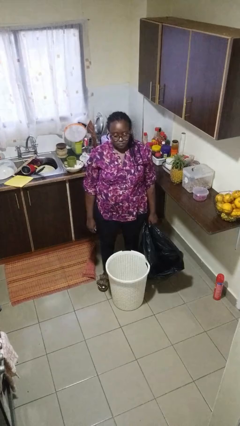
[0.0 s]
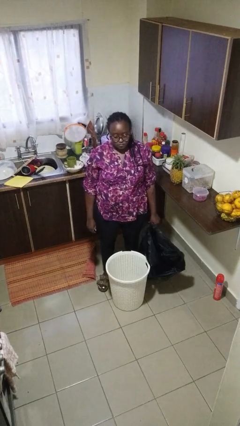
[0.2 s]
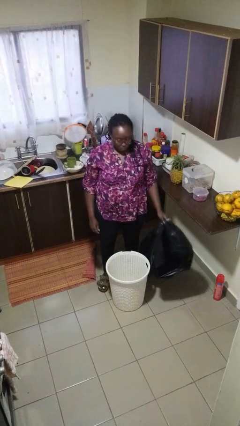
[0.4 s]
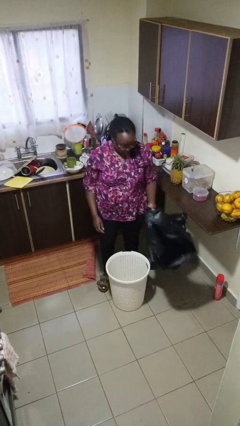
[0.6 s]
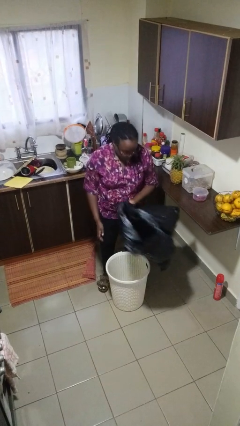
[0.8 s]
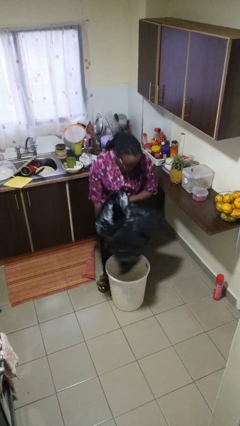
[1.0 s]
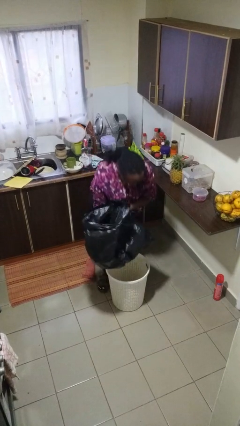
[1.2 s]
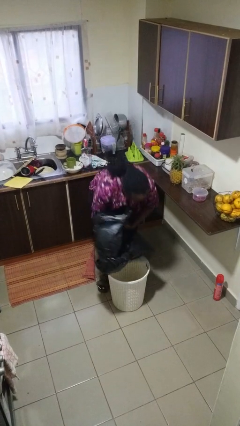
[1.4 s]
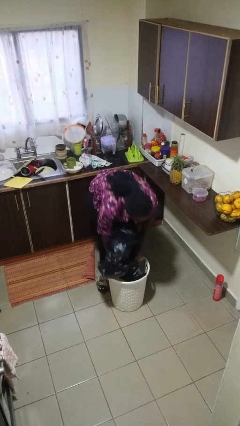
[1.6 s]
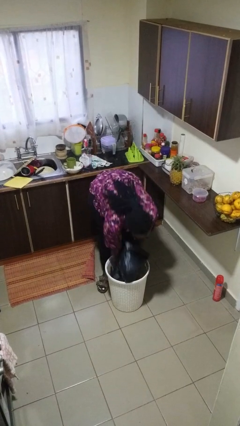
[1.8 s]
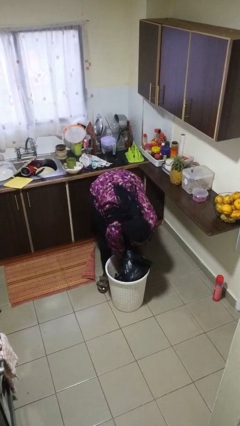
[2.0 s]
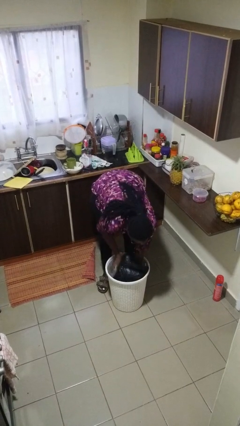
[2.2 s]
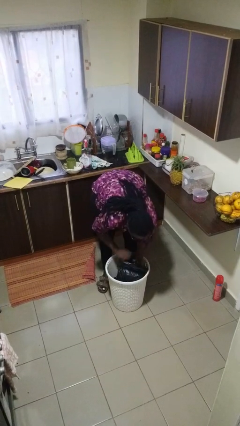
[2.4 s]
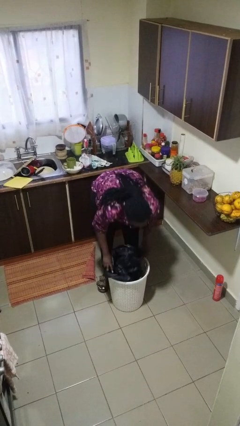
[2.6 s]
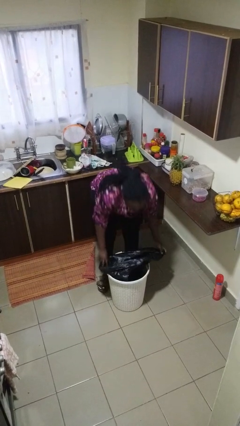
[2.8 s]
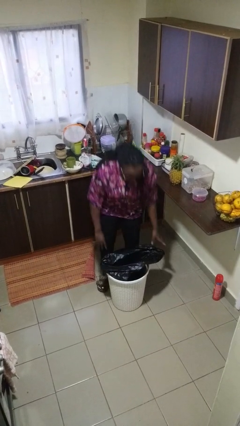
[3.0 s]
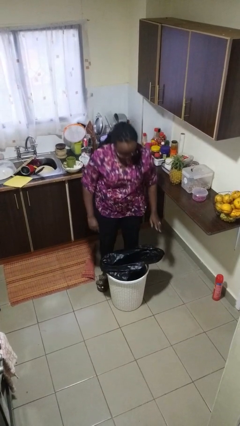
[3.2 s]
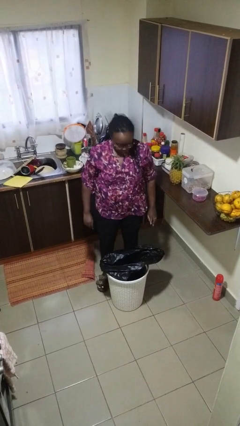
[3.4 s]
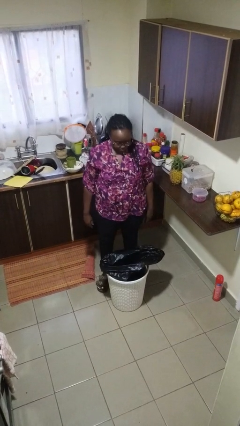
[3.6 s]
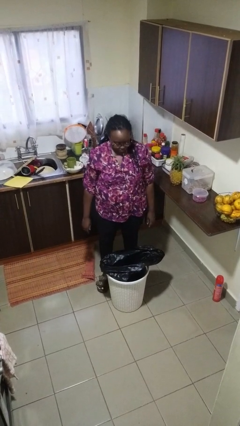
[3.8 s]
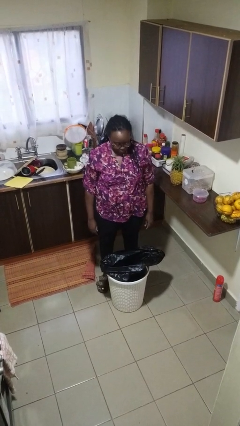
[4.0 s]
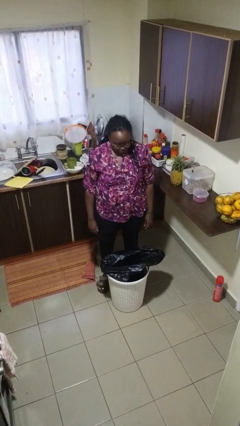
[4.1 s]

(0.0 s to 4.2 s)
person removes trashbag from trashcan

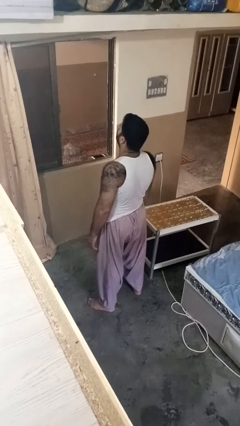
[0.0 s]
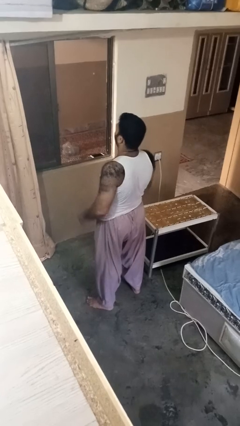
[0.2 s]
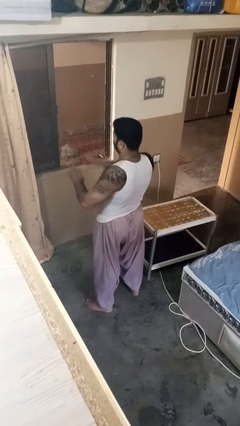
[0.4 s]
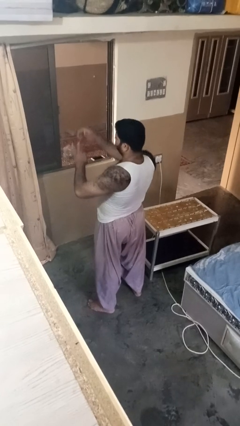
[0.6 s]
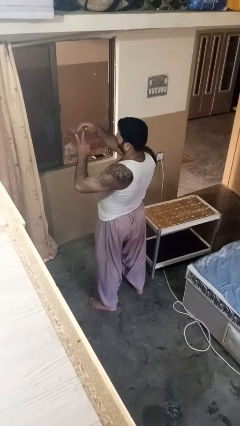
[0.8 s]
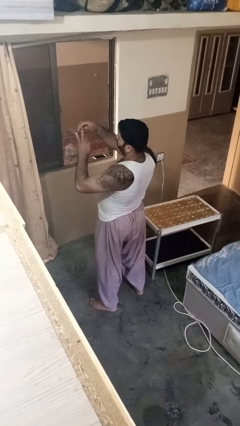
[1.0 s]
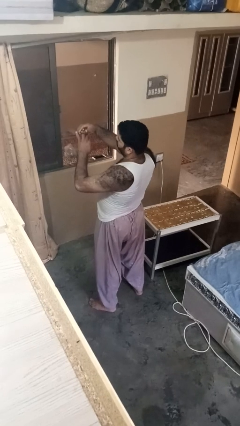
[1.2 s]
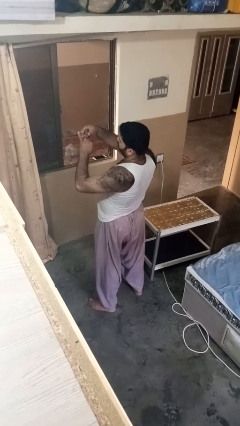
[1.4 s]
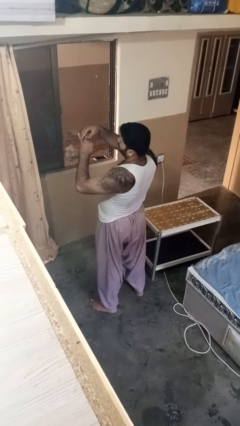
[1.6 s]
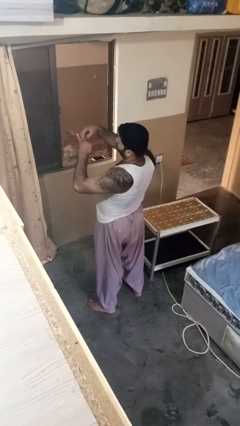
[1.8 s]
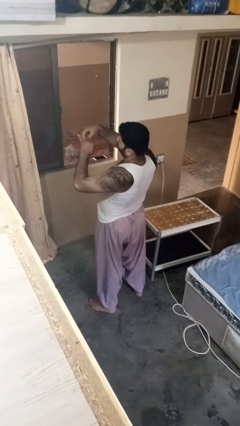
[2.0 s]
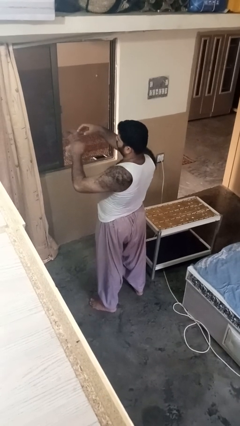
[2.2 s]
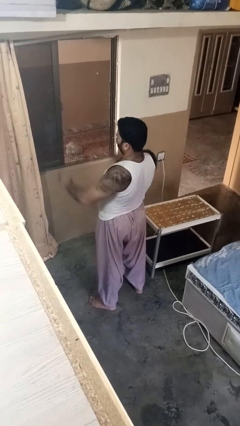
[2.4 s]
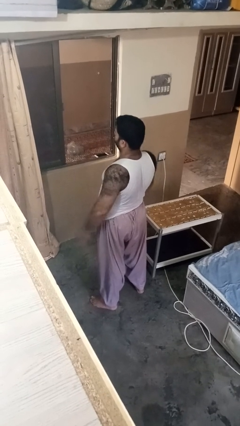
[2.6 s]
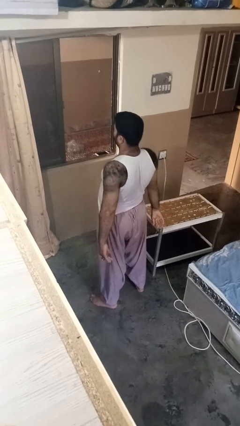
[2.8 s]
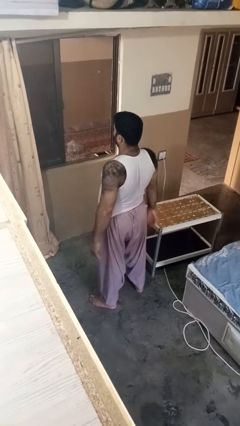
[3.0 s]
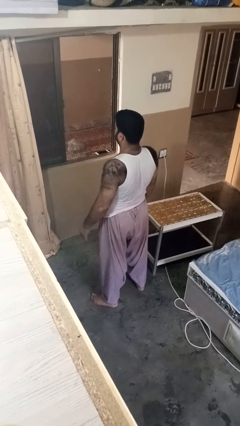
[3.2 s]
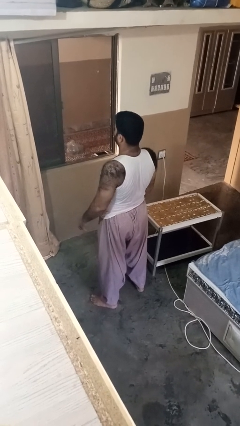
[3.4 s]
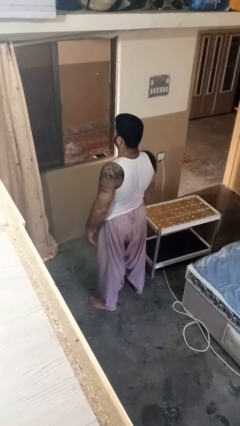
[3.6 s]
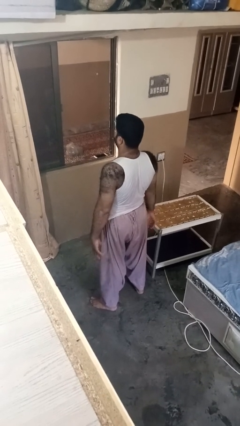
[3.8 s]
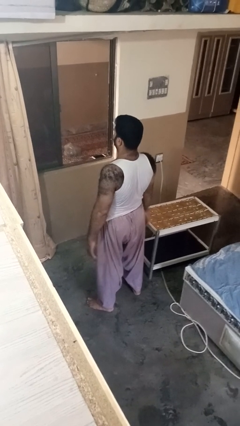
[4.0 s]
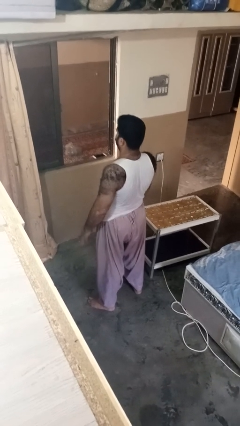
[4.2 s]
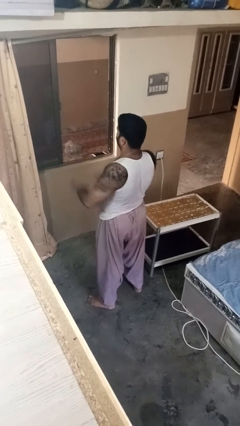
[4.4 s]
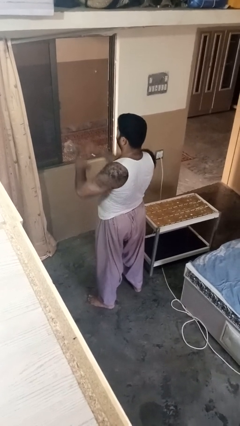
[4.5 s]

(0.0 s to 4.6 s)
person puts on ring

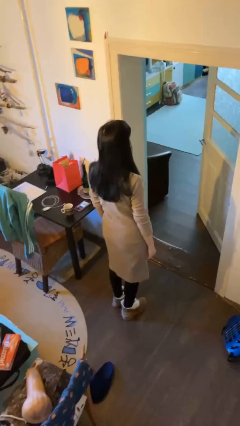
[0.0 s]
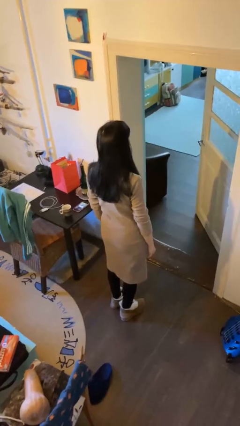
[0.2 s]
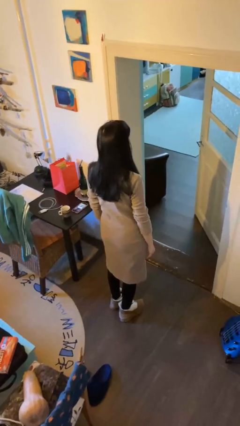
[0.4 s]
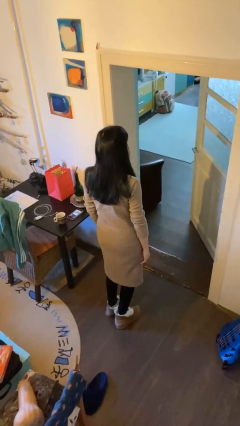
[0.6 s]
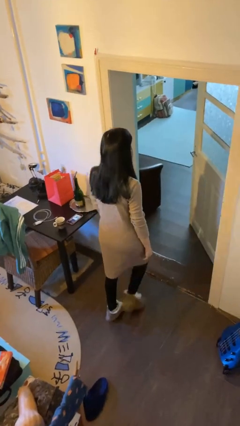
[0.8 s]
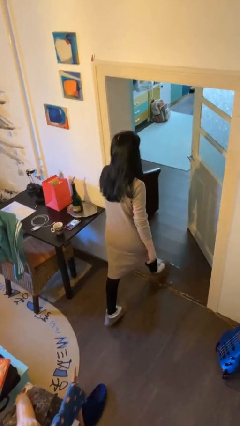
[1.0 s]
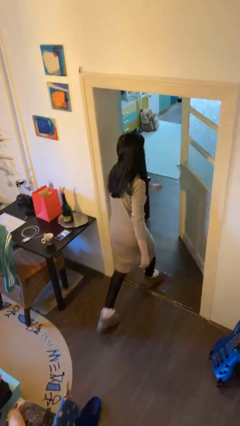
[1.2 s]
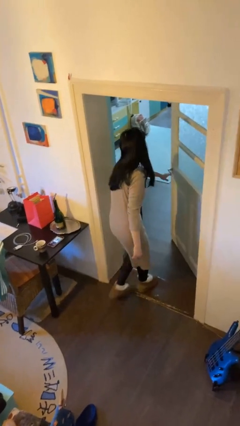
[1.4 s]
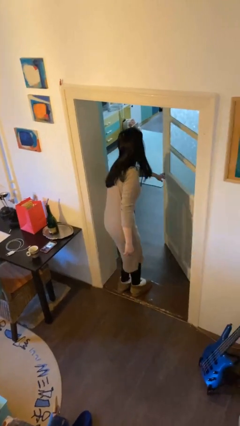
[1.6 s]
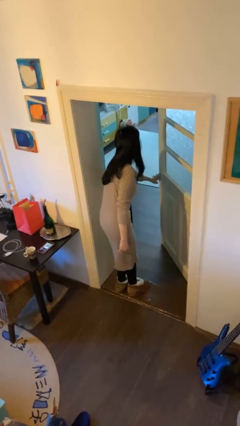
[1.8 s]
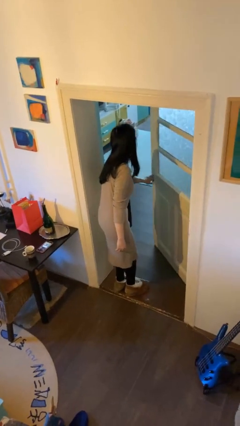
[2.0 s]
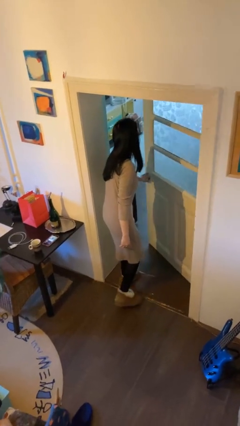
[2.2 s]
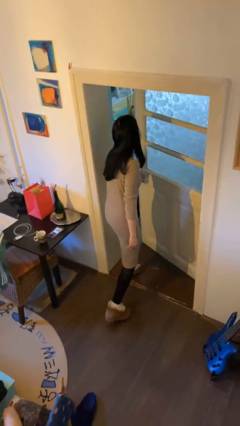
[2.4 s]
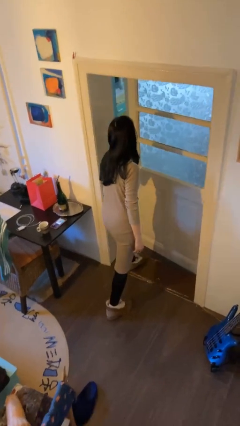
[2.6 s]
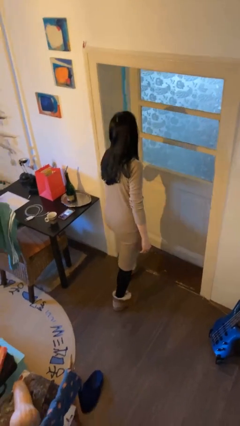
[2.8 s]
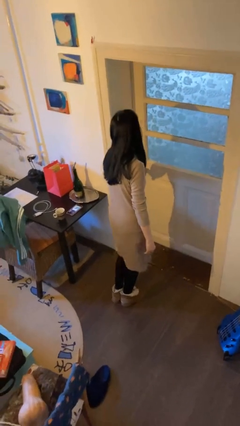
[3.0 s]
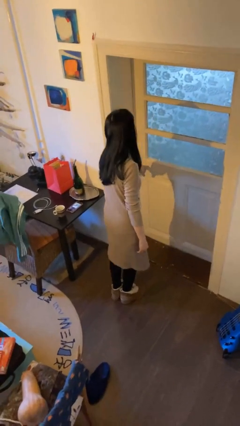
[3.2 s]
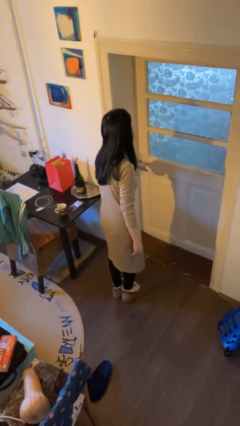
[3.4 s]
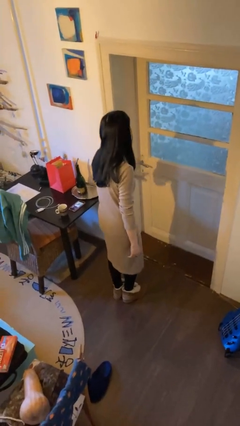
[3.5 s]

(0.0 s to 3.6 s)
person closes facility door

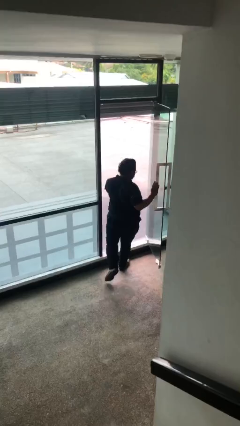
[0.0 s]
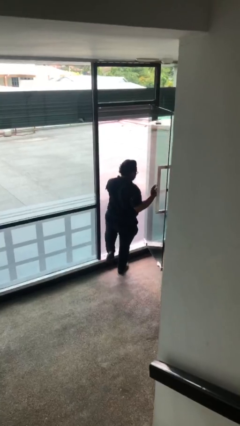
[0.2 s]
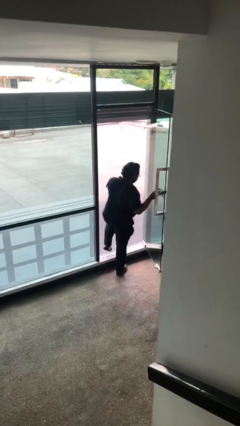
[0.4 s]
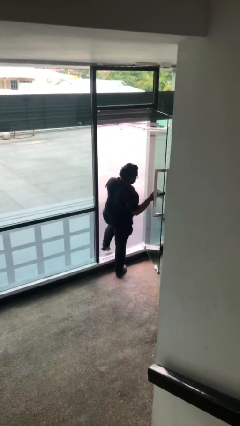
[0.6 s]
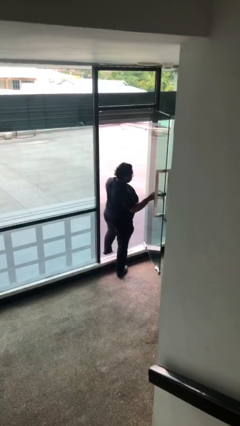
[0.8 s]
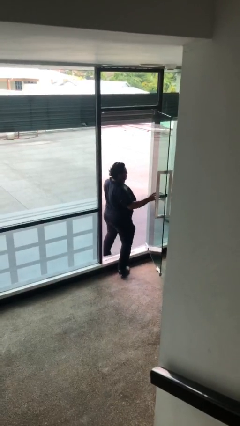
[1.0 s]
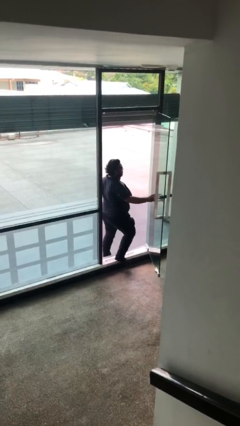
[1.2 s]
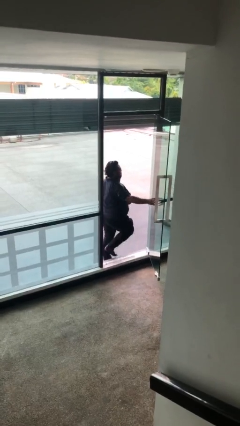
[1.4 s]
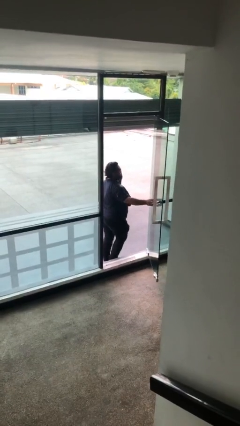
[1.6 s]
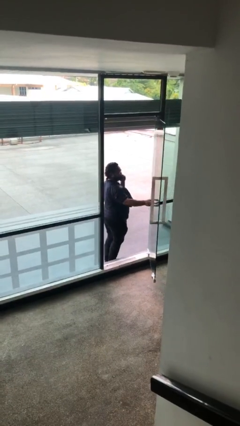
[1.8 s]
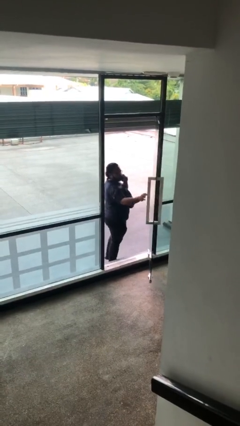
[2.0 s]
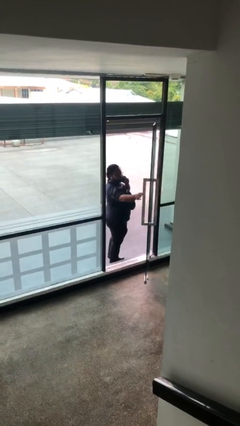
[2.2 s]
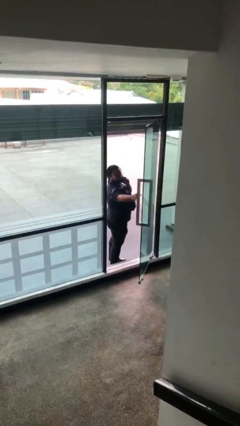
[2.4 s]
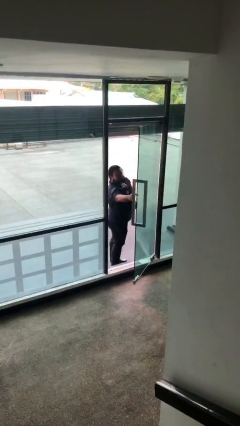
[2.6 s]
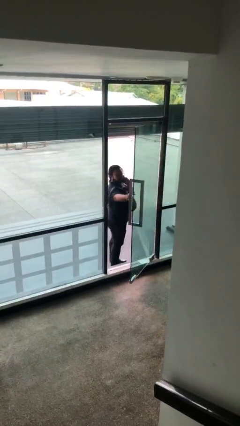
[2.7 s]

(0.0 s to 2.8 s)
person exits scene through structure

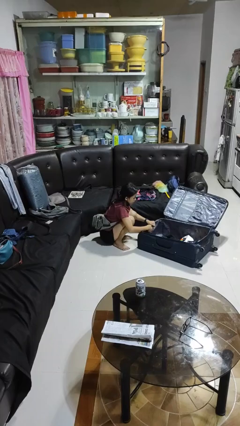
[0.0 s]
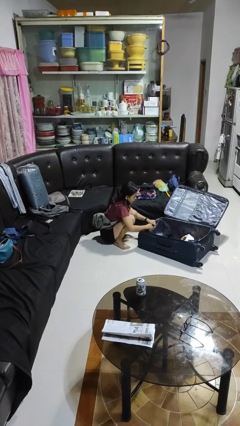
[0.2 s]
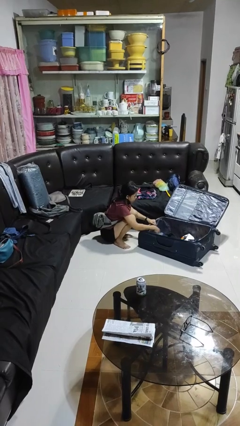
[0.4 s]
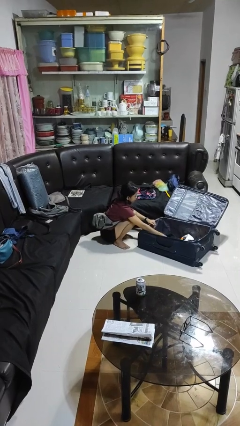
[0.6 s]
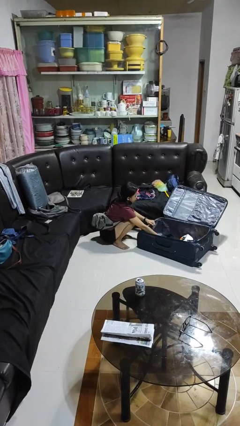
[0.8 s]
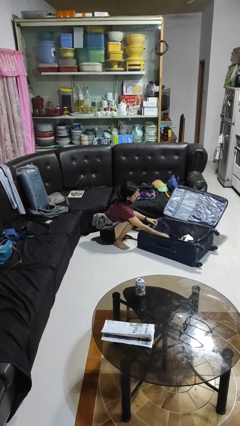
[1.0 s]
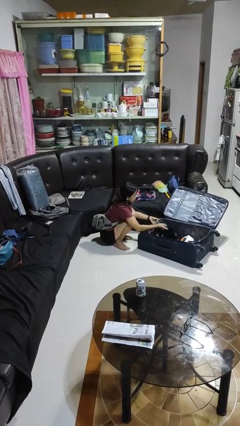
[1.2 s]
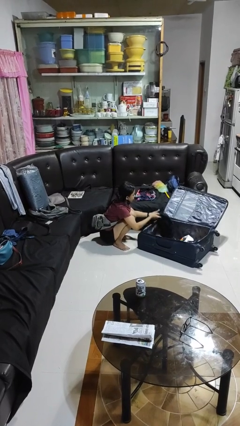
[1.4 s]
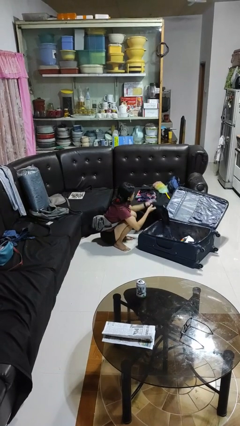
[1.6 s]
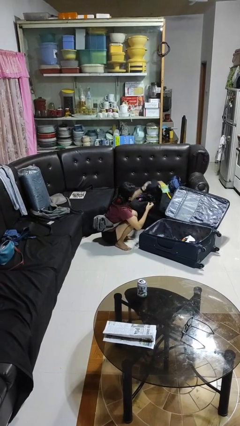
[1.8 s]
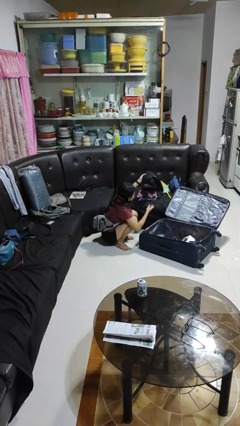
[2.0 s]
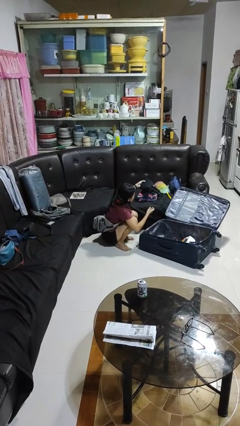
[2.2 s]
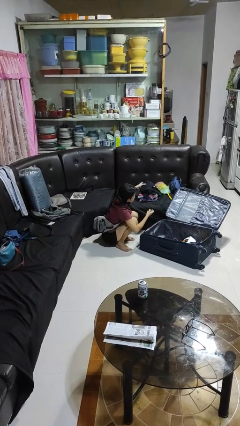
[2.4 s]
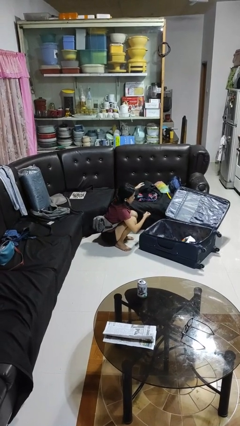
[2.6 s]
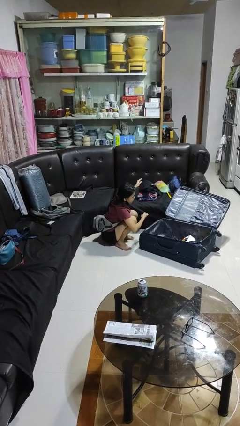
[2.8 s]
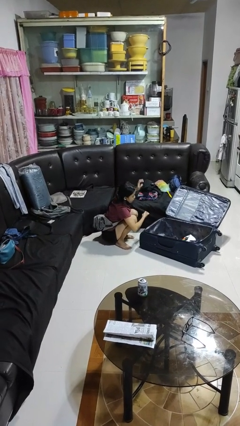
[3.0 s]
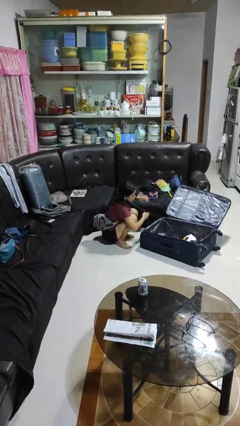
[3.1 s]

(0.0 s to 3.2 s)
person unloads clothes from suitcase
